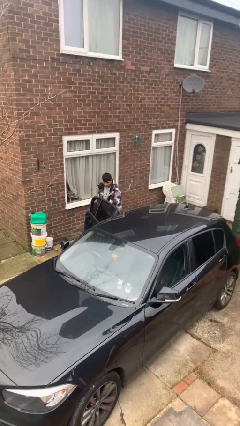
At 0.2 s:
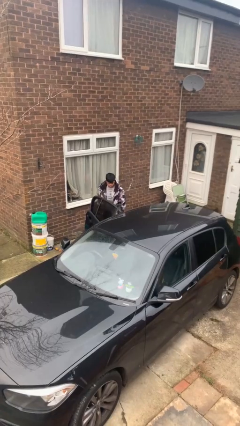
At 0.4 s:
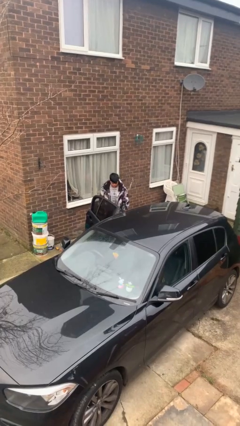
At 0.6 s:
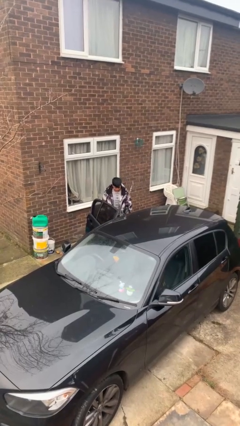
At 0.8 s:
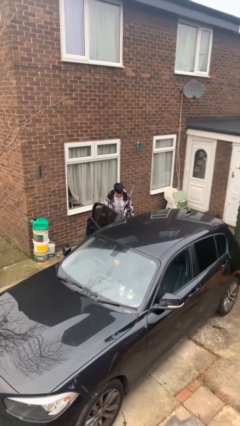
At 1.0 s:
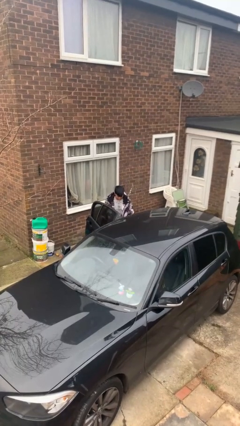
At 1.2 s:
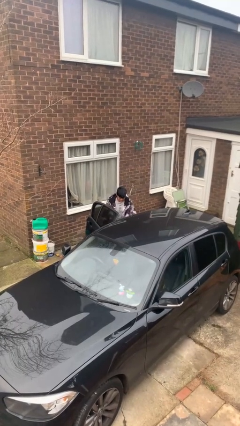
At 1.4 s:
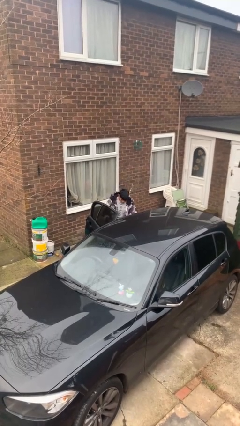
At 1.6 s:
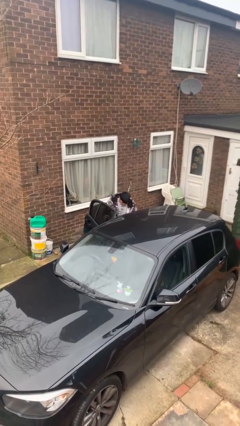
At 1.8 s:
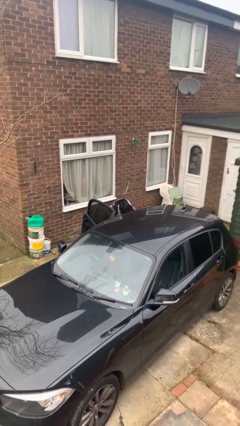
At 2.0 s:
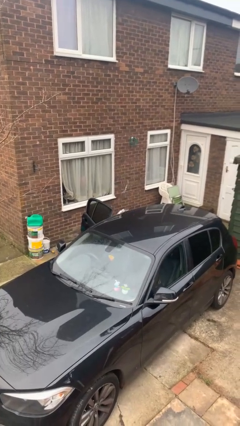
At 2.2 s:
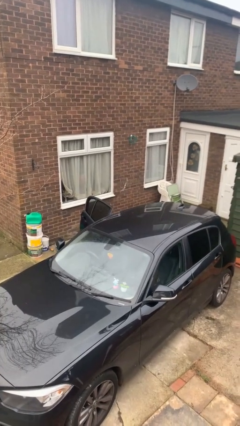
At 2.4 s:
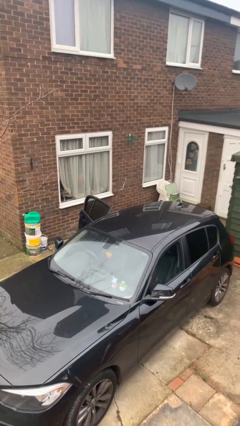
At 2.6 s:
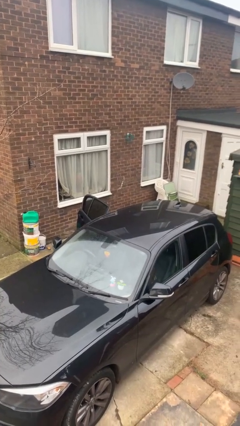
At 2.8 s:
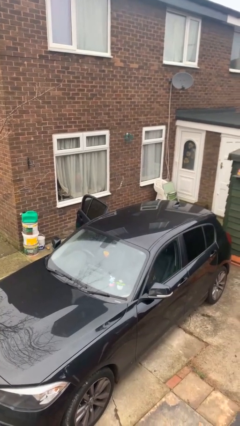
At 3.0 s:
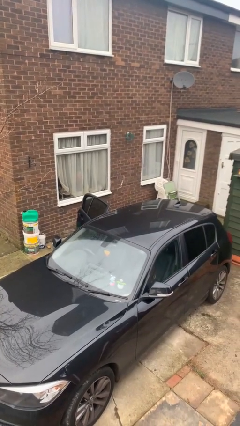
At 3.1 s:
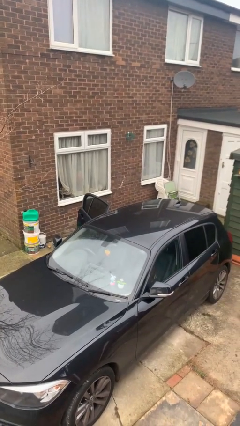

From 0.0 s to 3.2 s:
person enters car

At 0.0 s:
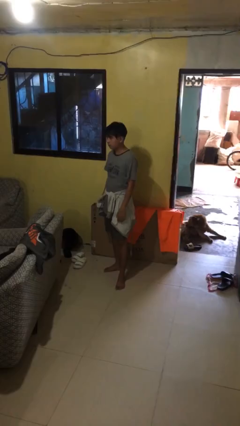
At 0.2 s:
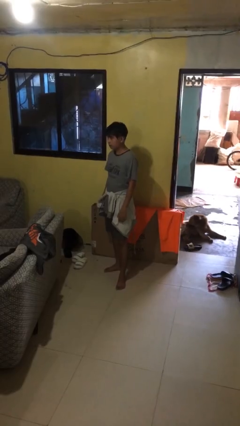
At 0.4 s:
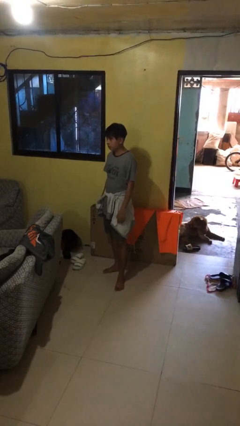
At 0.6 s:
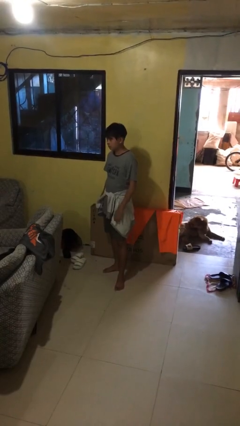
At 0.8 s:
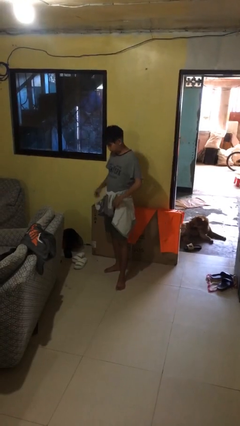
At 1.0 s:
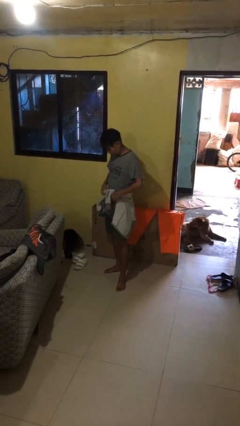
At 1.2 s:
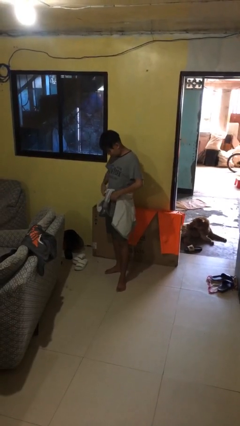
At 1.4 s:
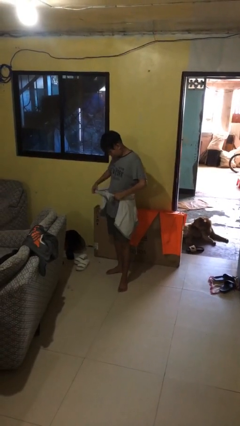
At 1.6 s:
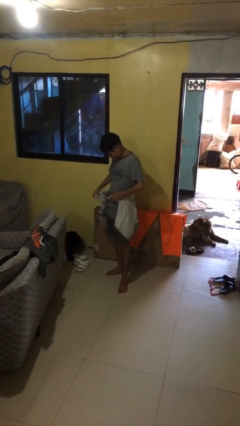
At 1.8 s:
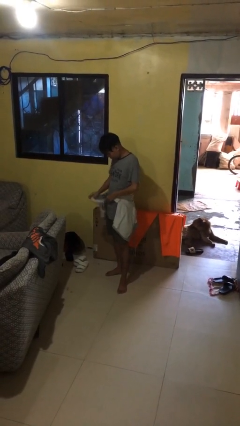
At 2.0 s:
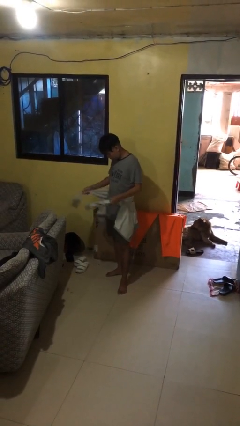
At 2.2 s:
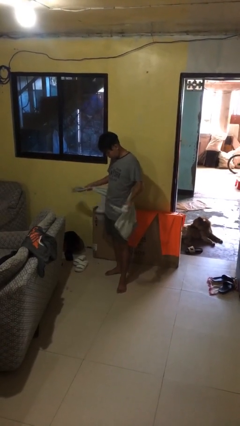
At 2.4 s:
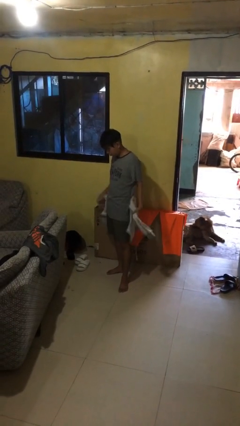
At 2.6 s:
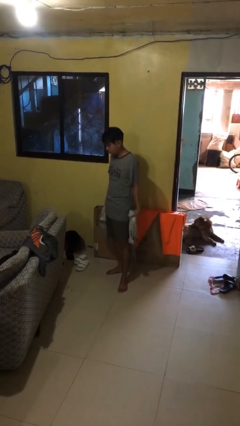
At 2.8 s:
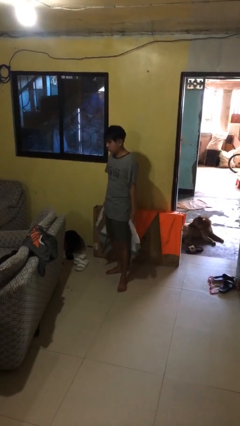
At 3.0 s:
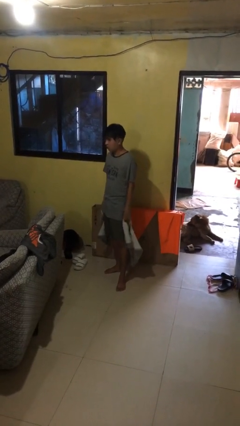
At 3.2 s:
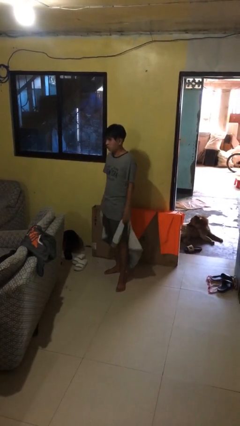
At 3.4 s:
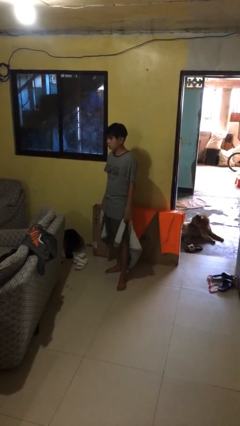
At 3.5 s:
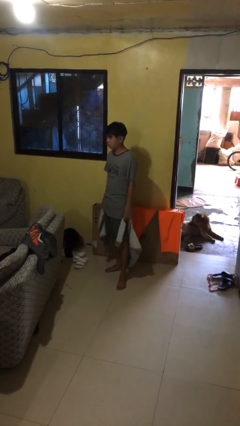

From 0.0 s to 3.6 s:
person unties jacket around waist

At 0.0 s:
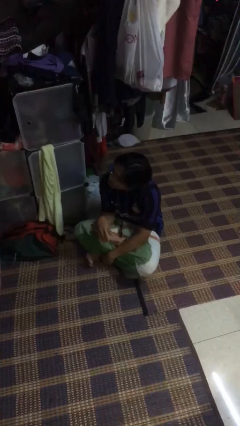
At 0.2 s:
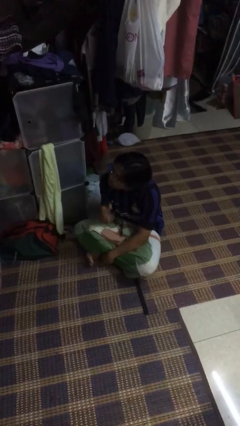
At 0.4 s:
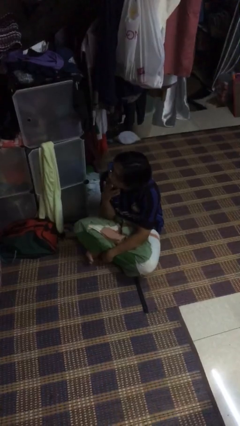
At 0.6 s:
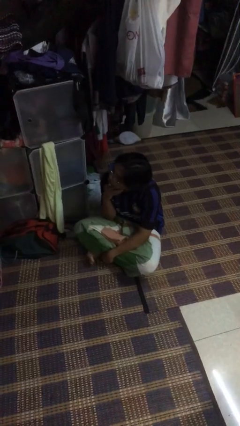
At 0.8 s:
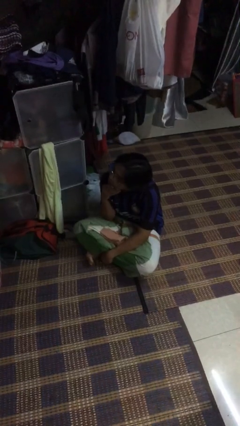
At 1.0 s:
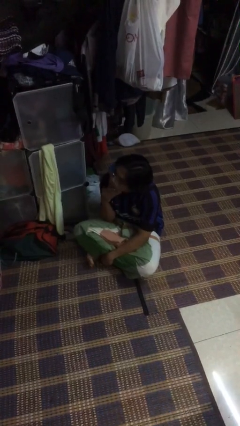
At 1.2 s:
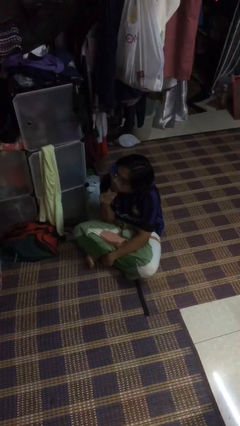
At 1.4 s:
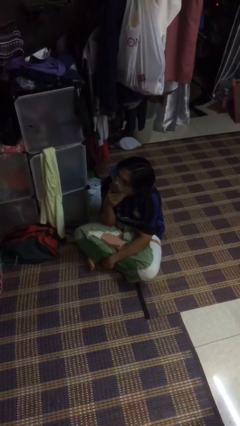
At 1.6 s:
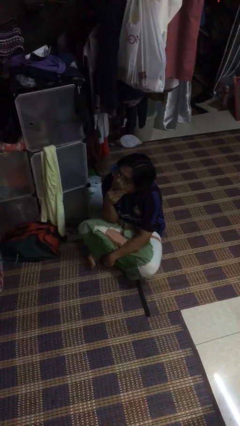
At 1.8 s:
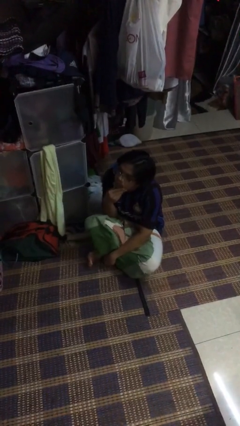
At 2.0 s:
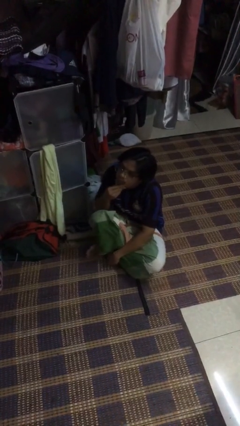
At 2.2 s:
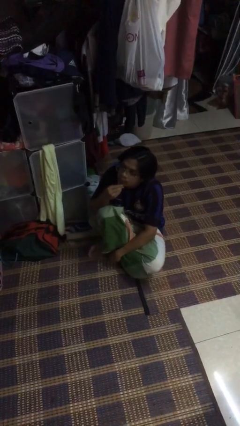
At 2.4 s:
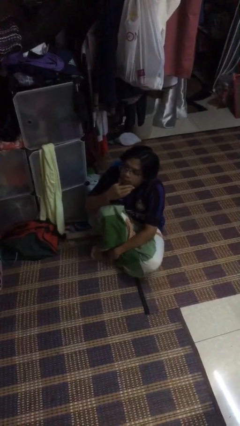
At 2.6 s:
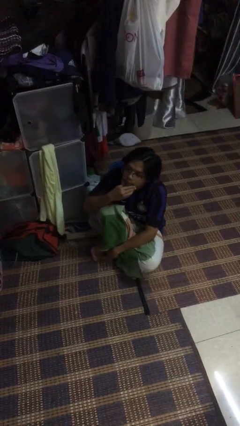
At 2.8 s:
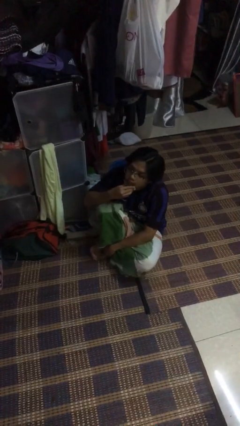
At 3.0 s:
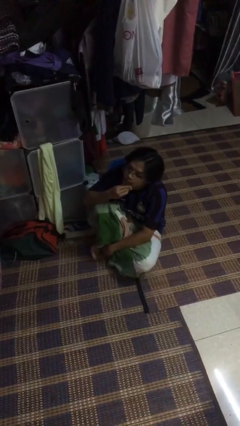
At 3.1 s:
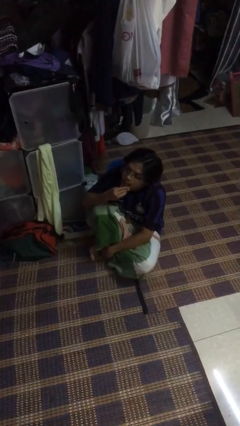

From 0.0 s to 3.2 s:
person strokes chin

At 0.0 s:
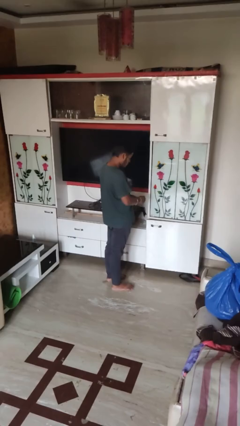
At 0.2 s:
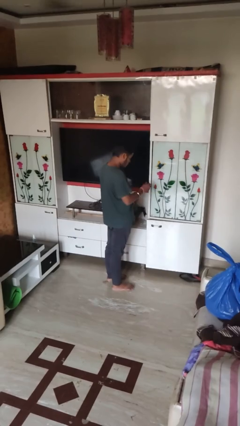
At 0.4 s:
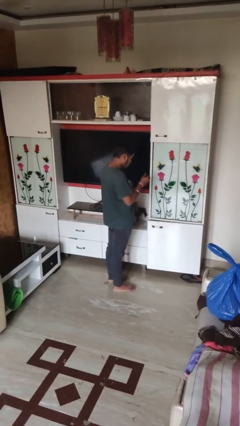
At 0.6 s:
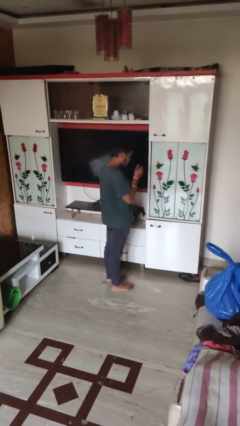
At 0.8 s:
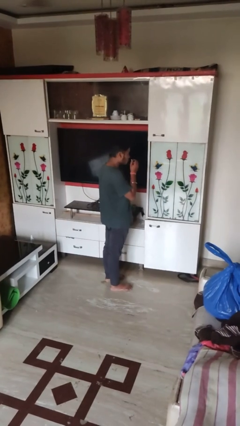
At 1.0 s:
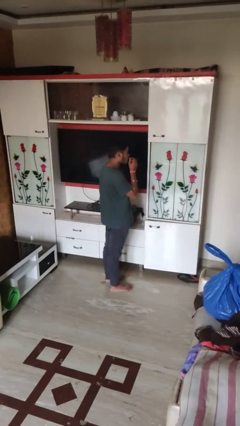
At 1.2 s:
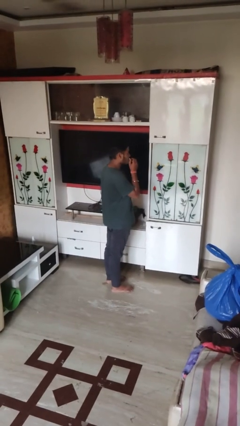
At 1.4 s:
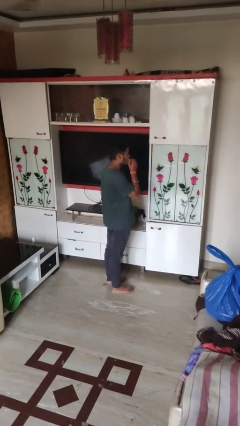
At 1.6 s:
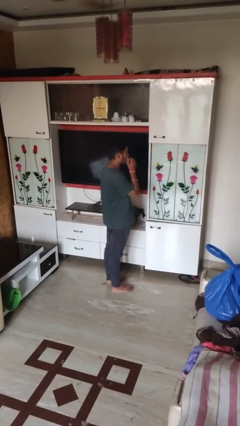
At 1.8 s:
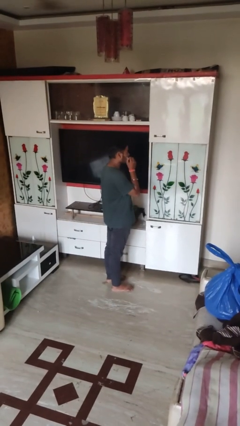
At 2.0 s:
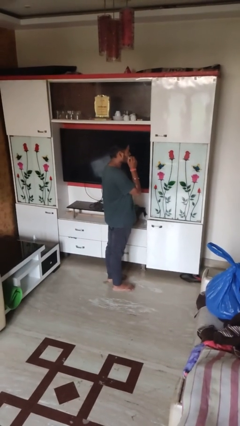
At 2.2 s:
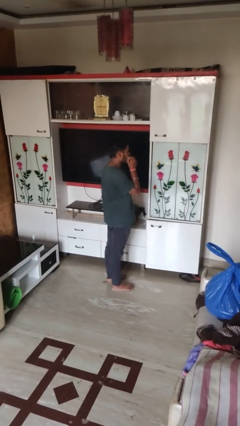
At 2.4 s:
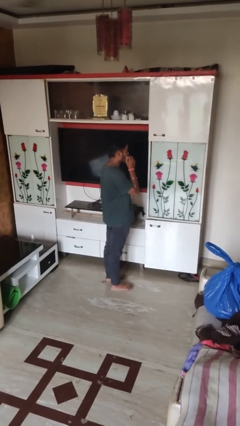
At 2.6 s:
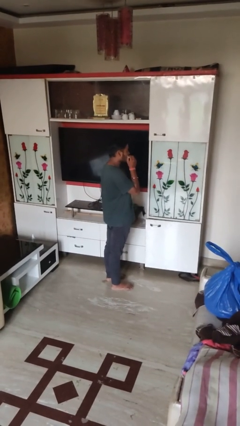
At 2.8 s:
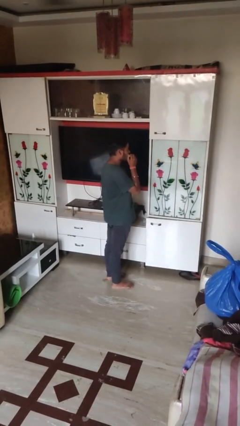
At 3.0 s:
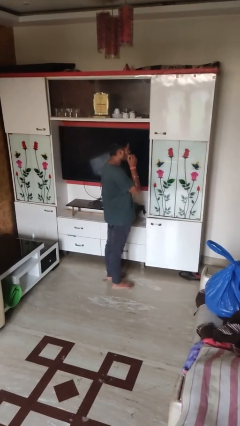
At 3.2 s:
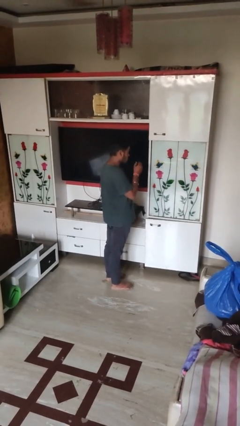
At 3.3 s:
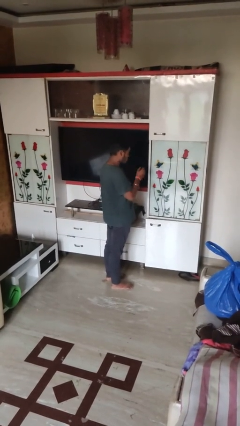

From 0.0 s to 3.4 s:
person applies lip makeup

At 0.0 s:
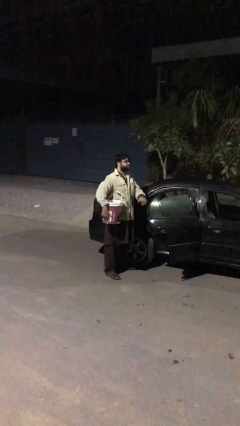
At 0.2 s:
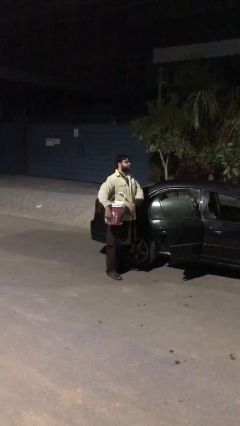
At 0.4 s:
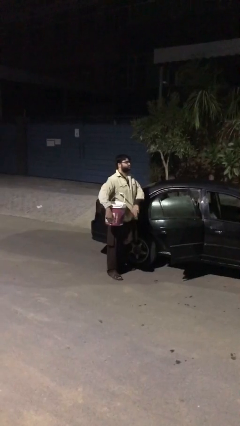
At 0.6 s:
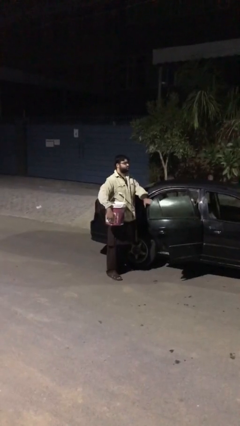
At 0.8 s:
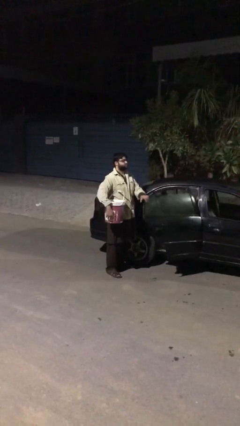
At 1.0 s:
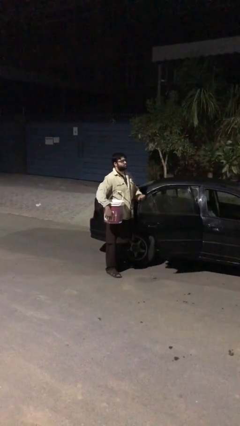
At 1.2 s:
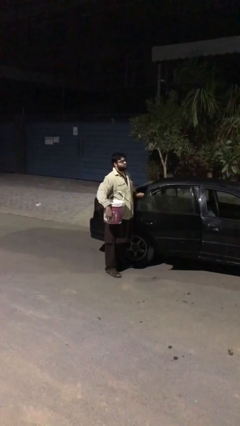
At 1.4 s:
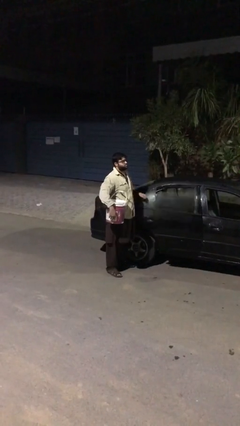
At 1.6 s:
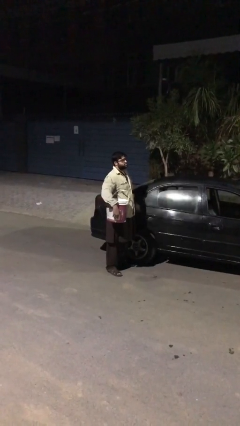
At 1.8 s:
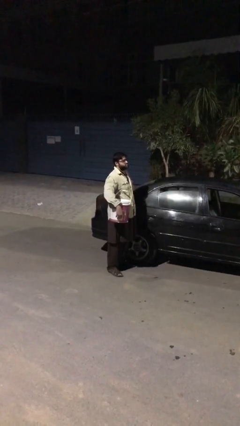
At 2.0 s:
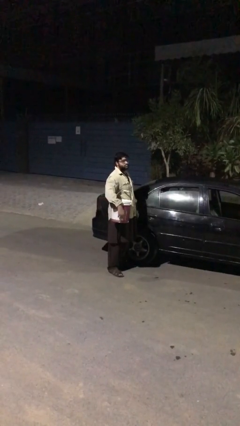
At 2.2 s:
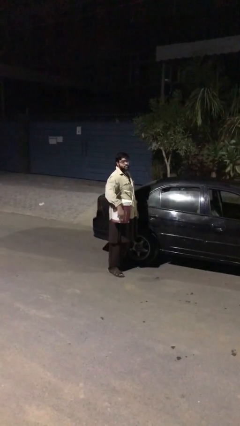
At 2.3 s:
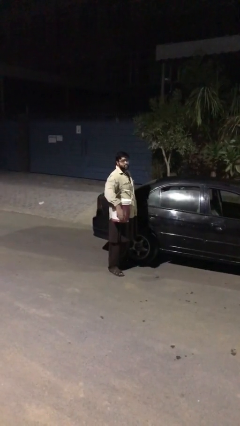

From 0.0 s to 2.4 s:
person closes car door

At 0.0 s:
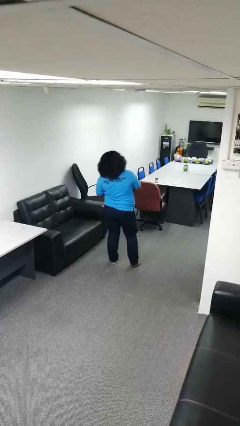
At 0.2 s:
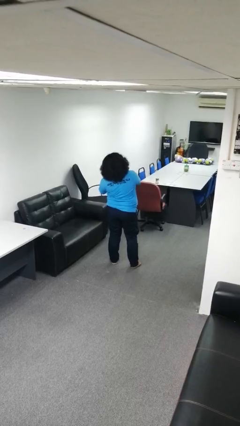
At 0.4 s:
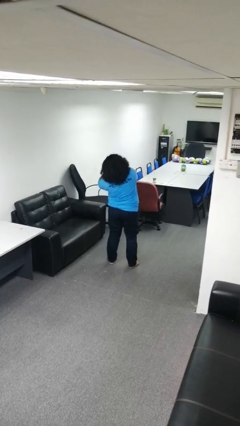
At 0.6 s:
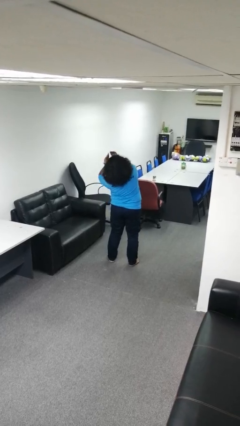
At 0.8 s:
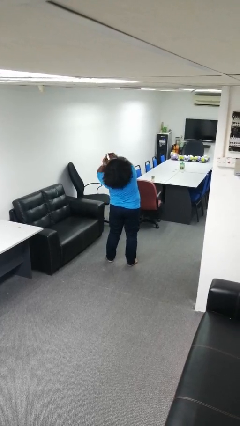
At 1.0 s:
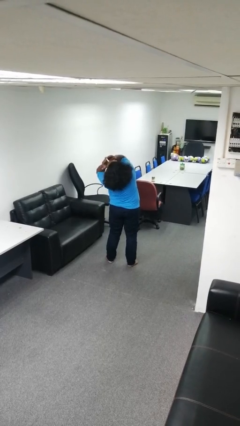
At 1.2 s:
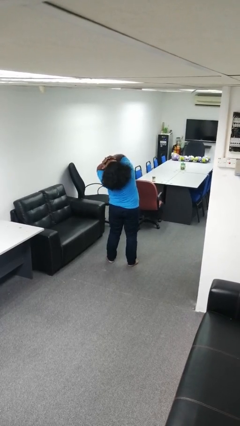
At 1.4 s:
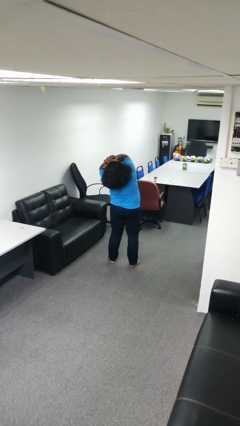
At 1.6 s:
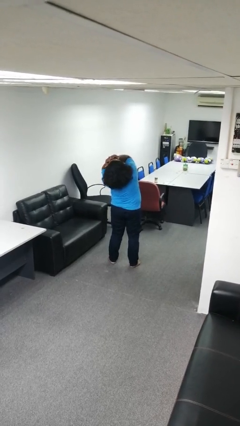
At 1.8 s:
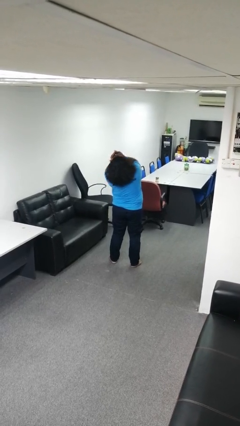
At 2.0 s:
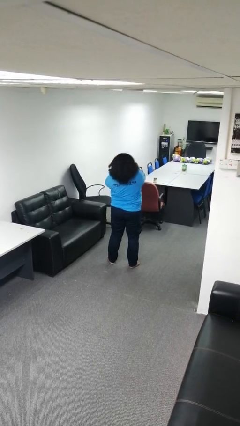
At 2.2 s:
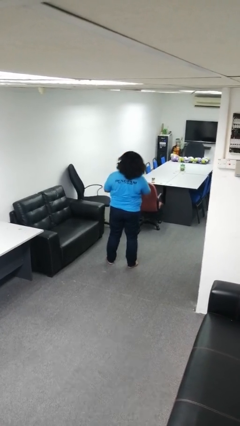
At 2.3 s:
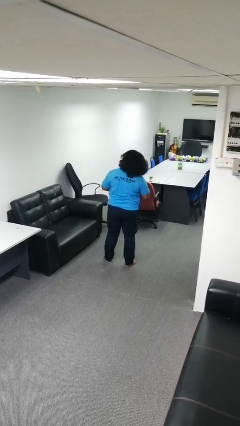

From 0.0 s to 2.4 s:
person covers face with hands
